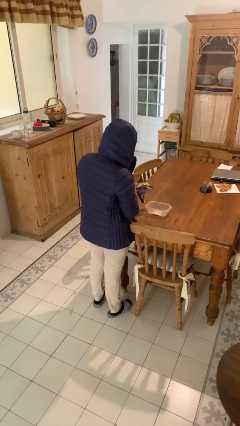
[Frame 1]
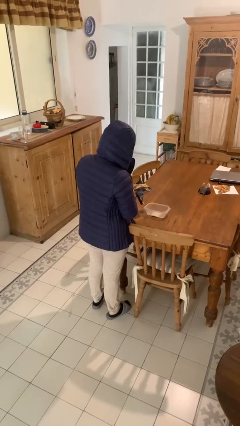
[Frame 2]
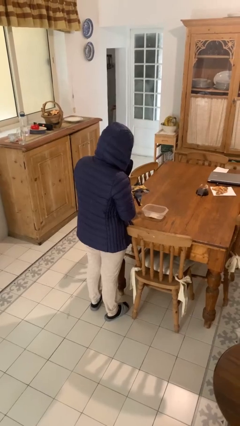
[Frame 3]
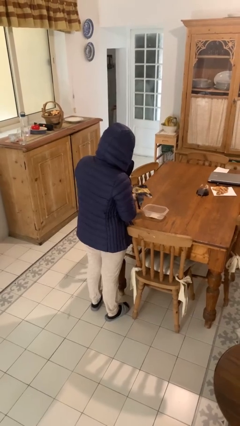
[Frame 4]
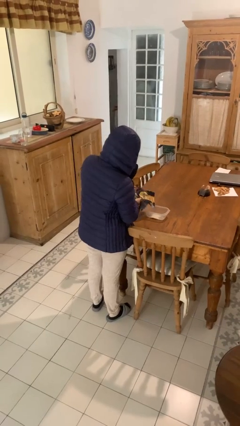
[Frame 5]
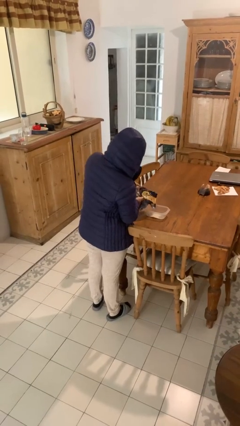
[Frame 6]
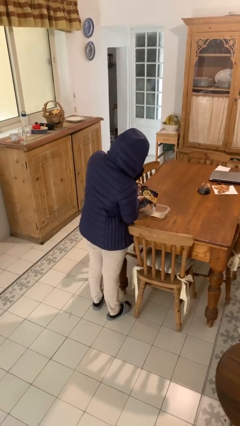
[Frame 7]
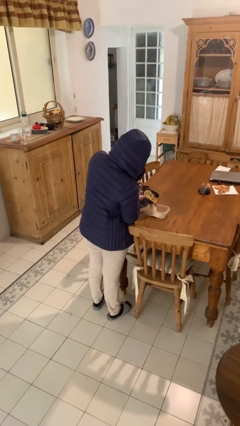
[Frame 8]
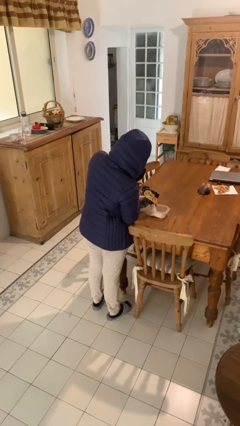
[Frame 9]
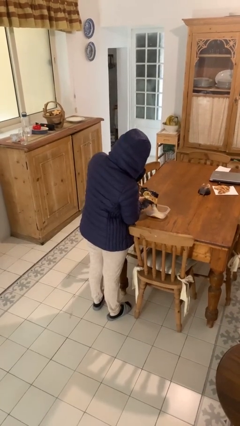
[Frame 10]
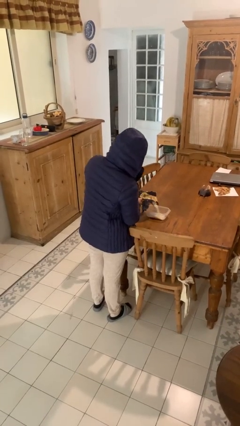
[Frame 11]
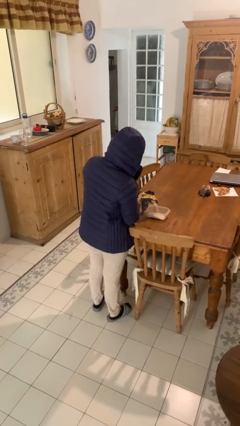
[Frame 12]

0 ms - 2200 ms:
person pours into bowl

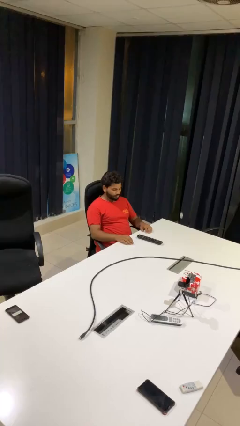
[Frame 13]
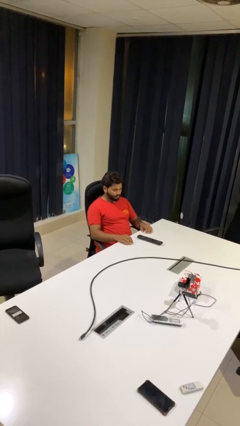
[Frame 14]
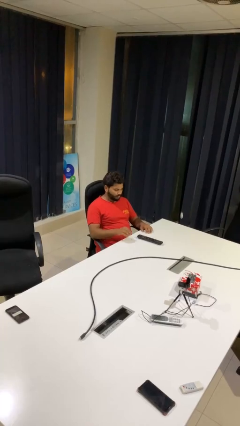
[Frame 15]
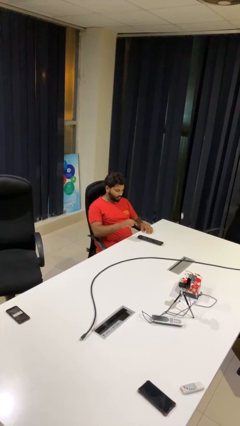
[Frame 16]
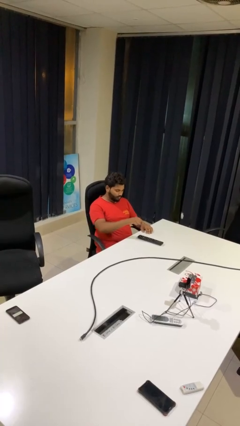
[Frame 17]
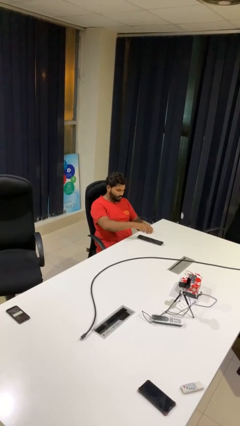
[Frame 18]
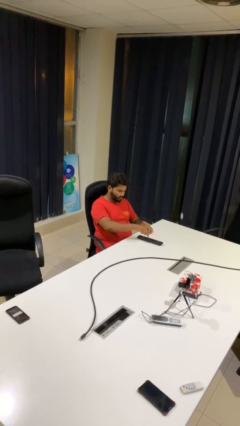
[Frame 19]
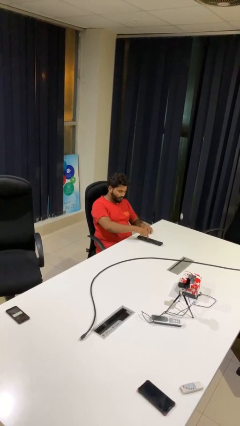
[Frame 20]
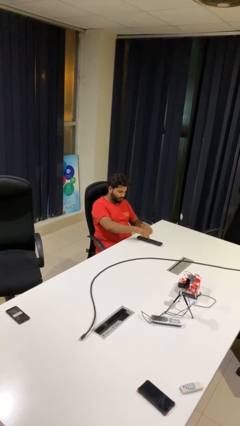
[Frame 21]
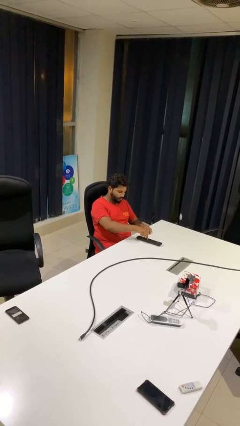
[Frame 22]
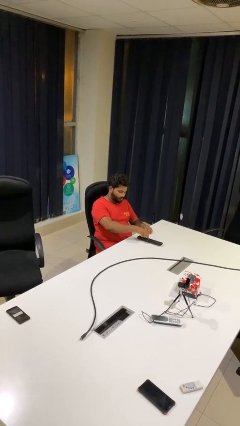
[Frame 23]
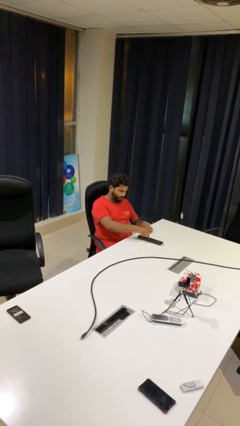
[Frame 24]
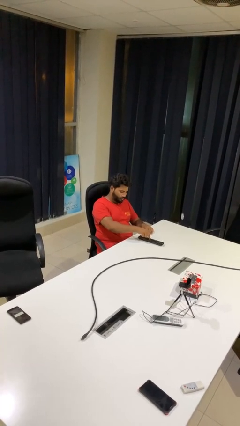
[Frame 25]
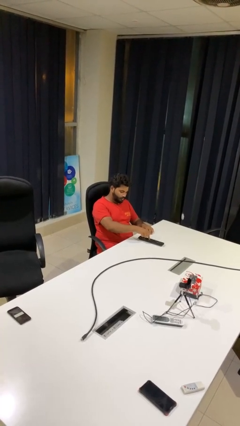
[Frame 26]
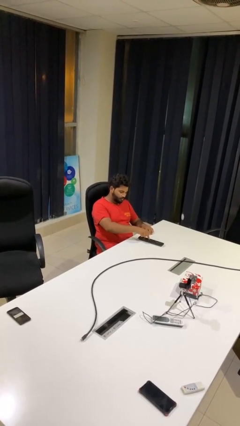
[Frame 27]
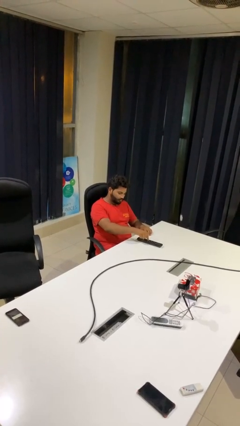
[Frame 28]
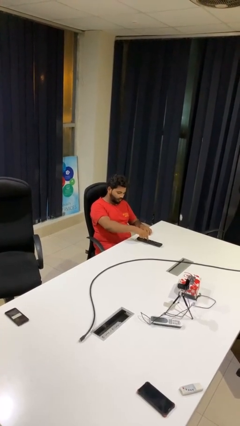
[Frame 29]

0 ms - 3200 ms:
person taps object with finger

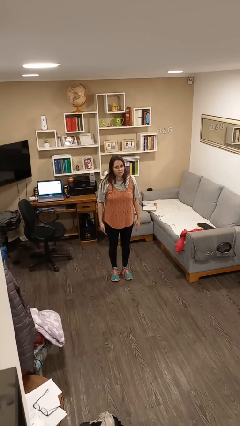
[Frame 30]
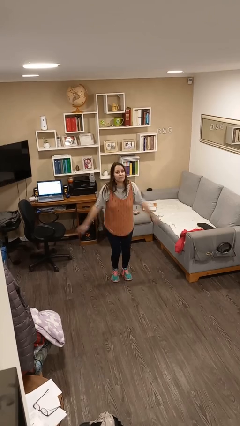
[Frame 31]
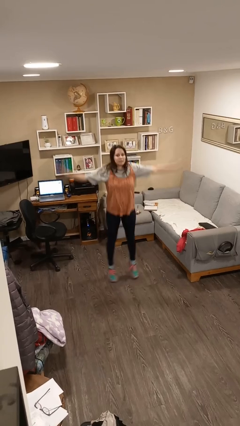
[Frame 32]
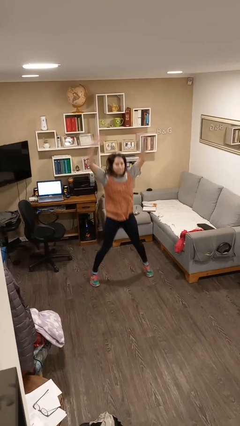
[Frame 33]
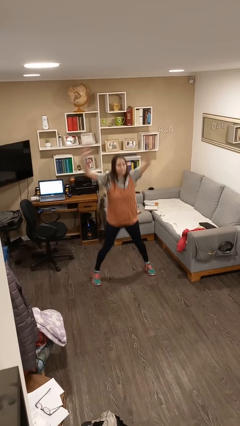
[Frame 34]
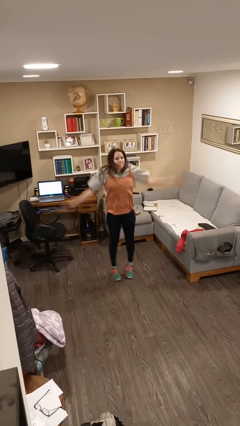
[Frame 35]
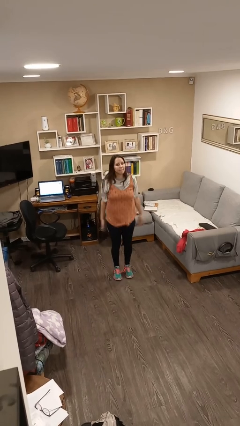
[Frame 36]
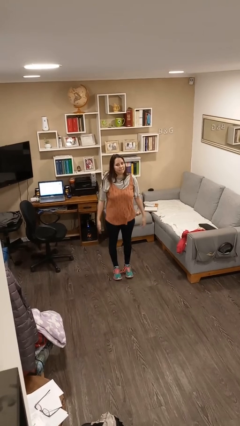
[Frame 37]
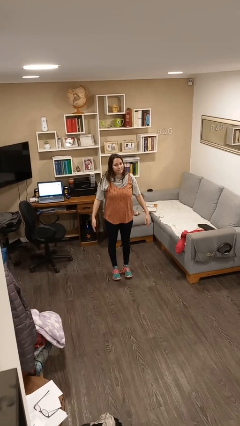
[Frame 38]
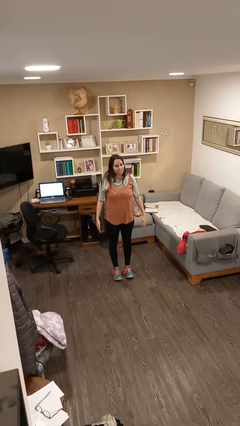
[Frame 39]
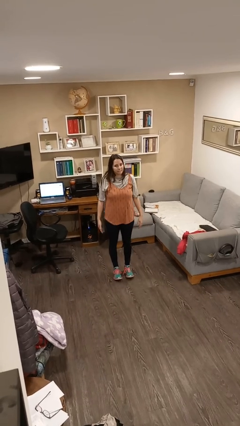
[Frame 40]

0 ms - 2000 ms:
person exercises with jumping jacks

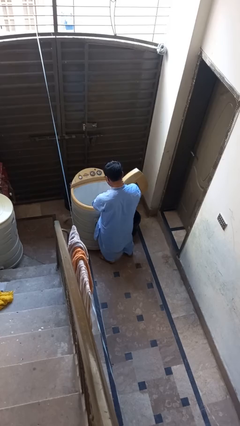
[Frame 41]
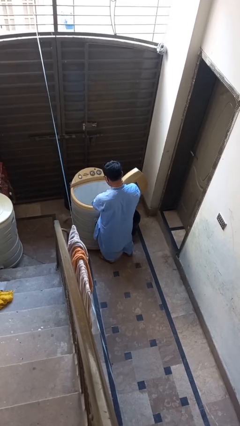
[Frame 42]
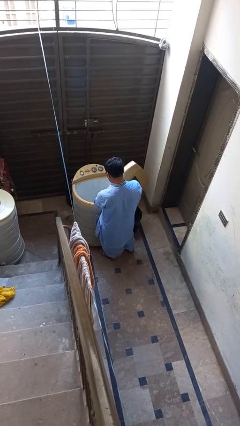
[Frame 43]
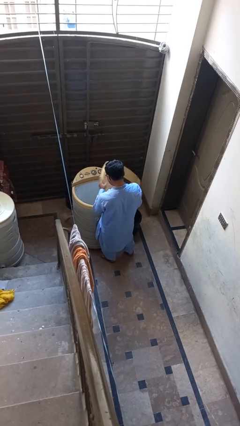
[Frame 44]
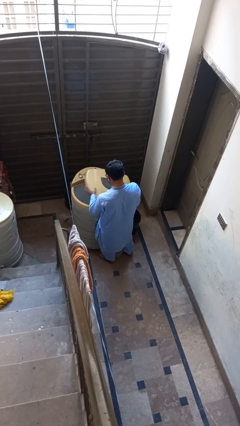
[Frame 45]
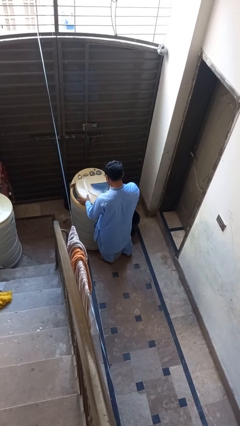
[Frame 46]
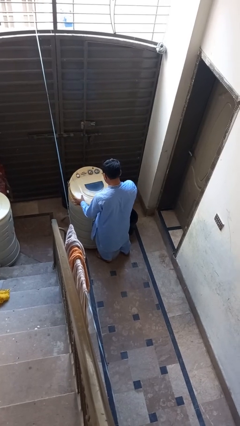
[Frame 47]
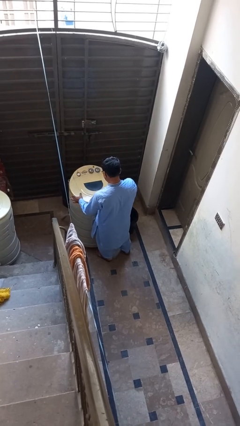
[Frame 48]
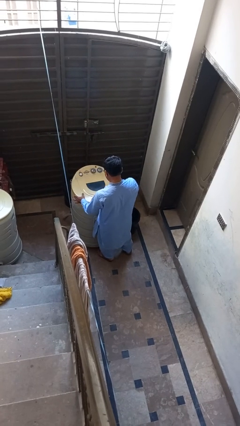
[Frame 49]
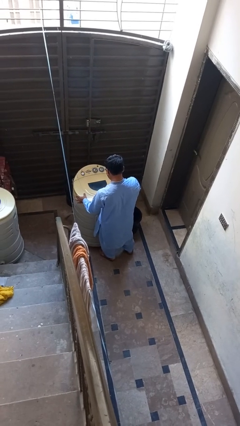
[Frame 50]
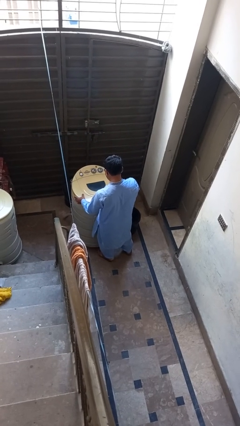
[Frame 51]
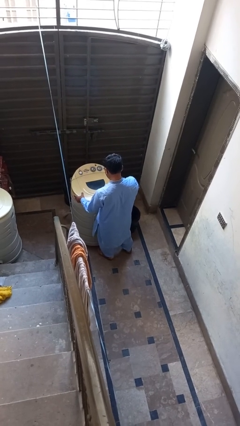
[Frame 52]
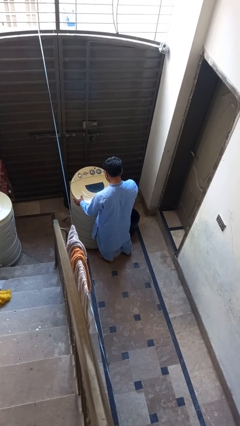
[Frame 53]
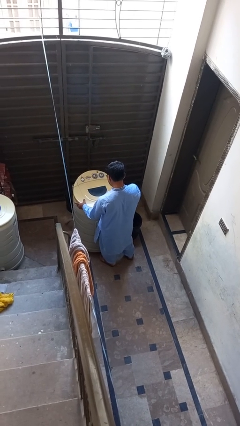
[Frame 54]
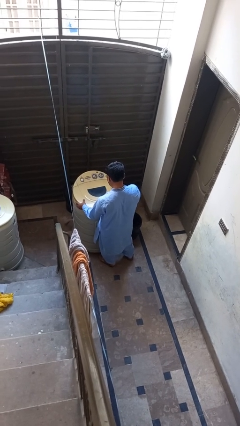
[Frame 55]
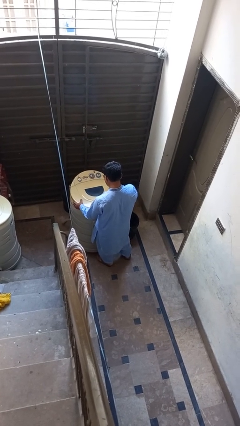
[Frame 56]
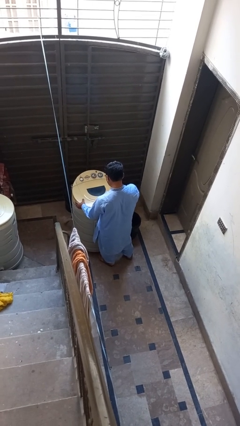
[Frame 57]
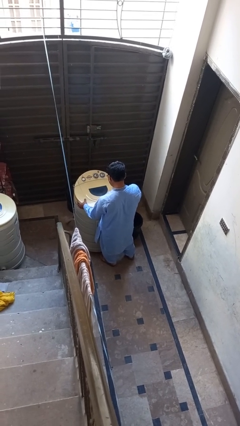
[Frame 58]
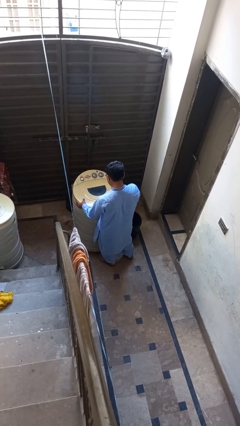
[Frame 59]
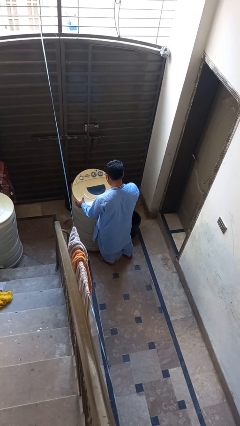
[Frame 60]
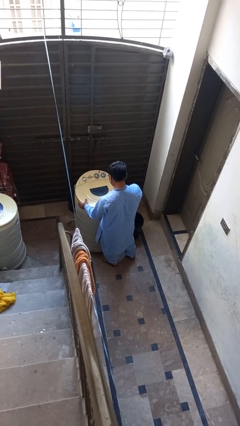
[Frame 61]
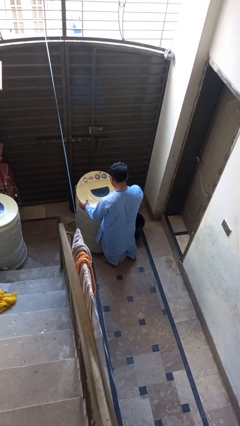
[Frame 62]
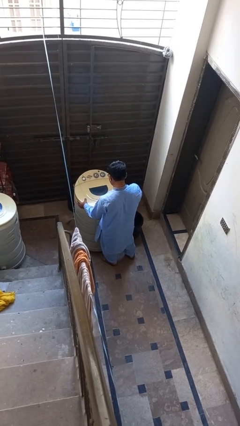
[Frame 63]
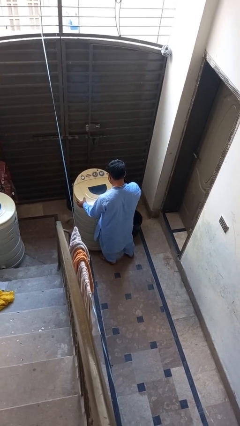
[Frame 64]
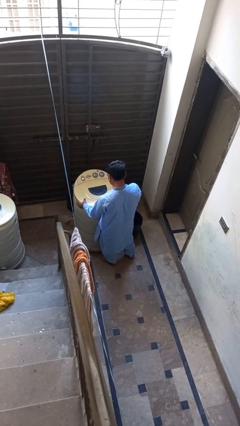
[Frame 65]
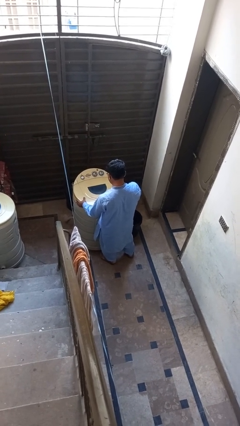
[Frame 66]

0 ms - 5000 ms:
person closes clothes washer

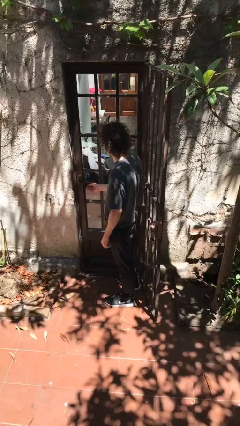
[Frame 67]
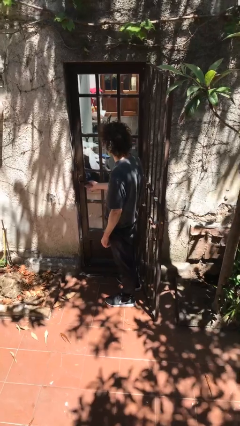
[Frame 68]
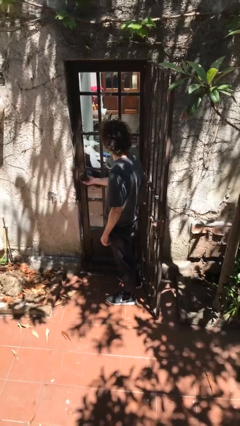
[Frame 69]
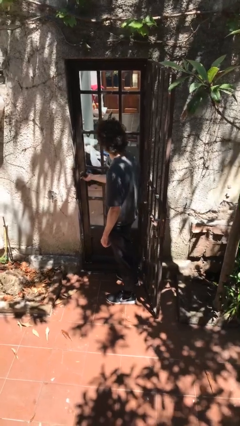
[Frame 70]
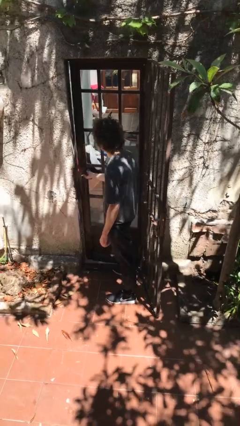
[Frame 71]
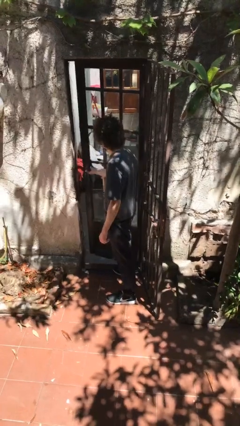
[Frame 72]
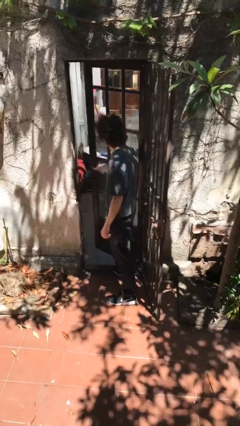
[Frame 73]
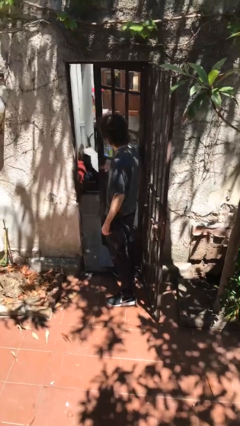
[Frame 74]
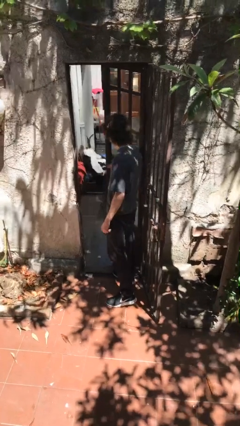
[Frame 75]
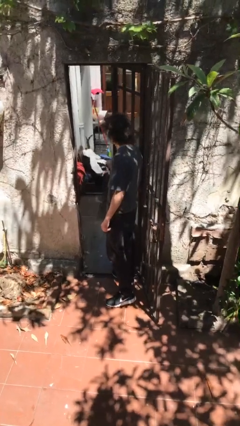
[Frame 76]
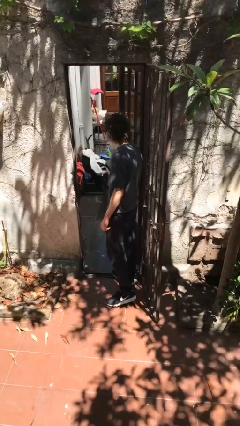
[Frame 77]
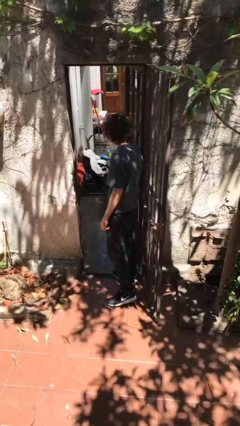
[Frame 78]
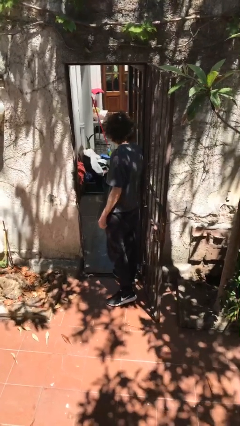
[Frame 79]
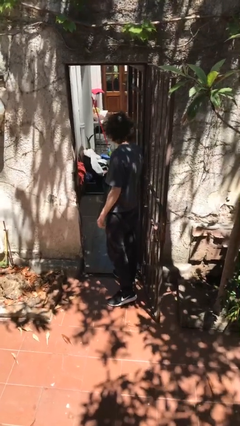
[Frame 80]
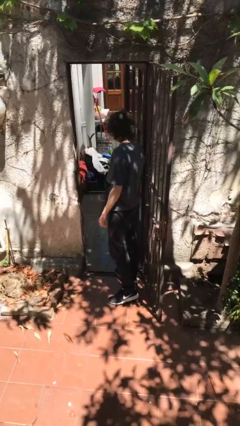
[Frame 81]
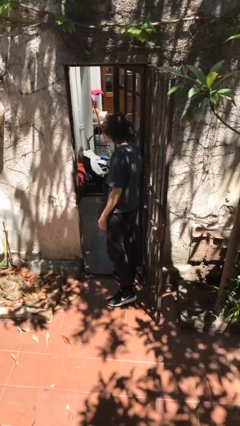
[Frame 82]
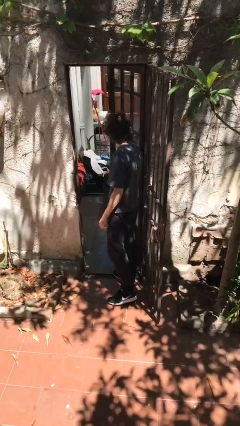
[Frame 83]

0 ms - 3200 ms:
person opens facility door

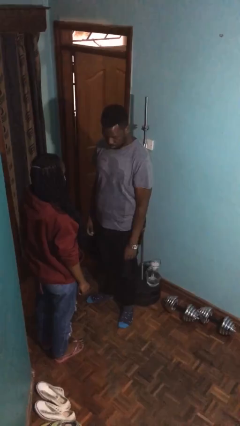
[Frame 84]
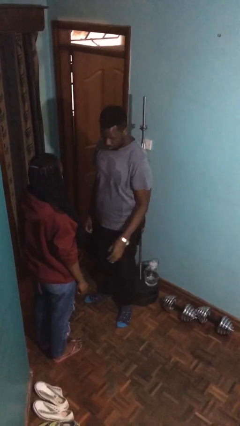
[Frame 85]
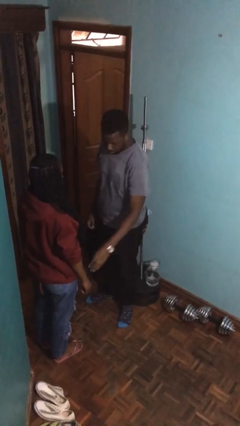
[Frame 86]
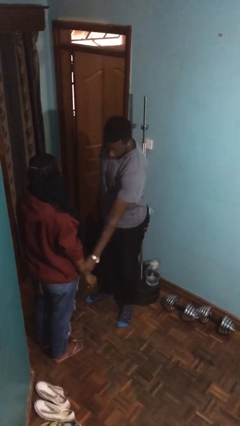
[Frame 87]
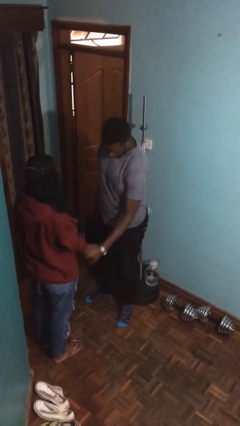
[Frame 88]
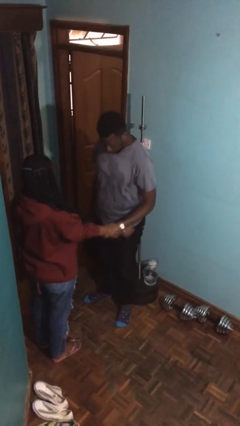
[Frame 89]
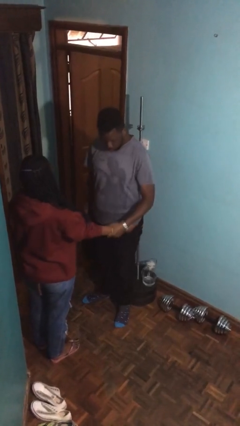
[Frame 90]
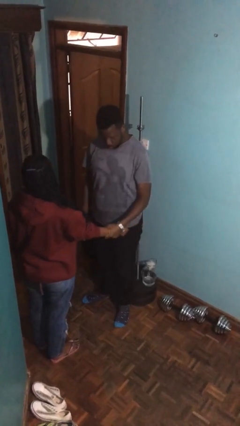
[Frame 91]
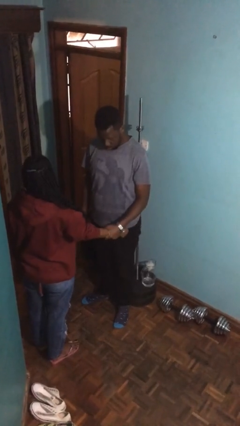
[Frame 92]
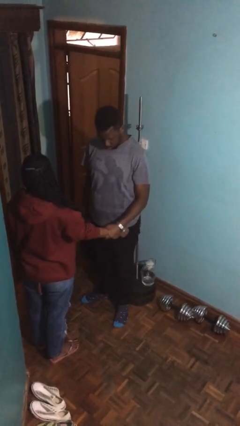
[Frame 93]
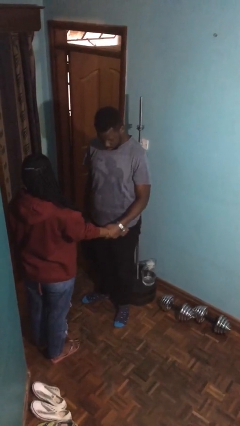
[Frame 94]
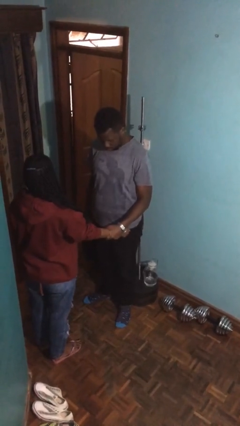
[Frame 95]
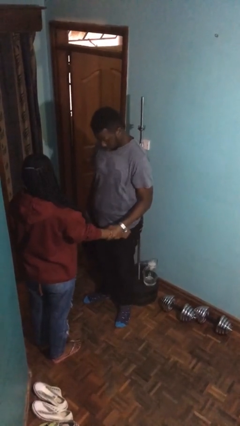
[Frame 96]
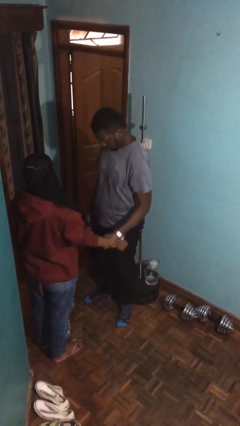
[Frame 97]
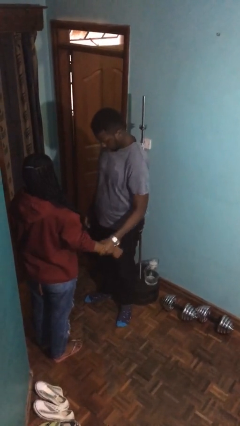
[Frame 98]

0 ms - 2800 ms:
person grabs person by forearm
